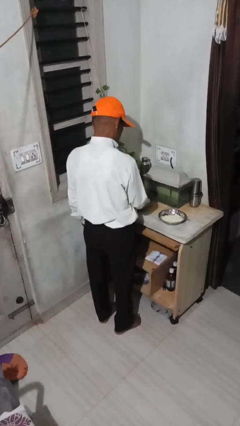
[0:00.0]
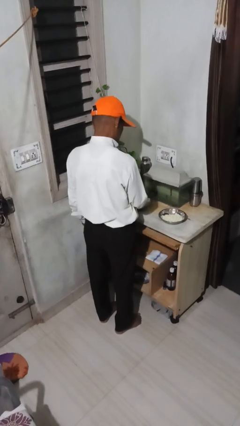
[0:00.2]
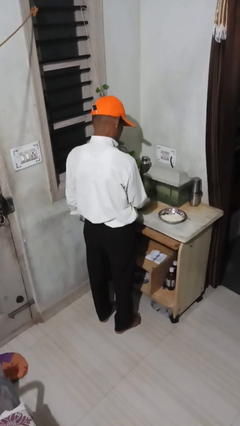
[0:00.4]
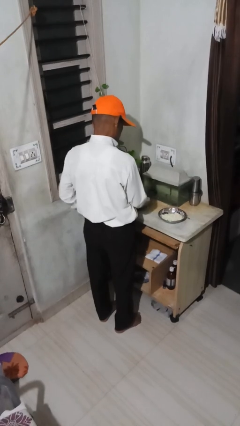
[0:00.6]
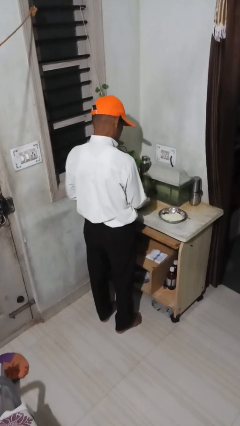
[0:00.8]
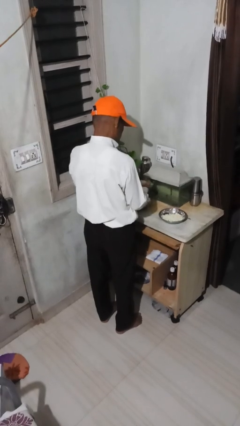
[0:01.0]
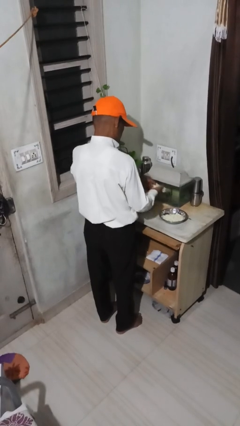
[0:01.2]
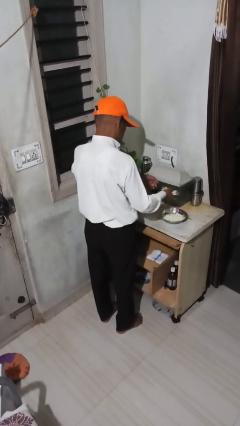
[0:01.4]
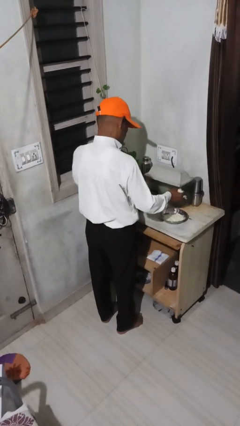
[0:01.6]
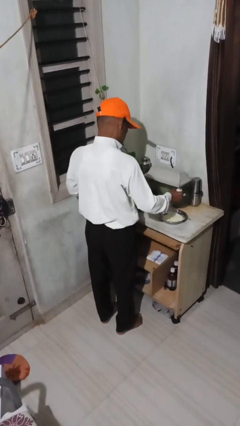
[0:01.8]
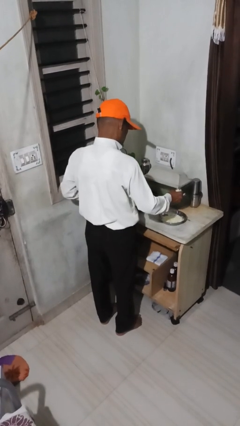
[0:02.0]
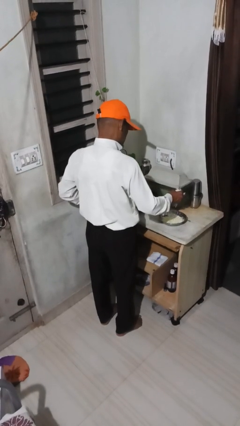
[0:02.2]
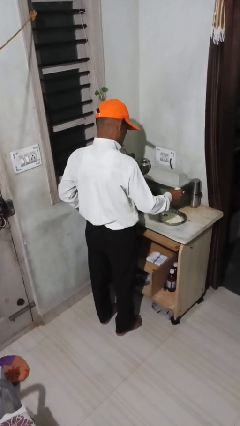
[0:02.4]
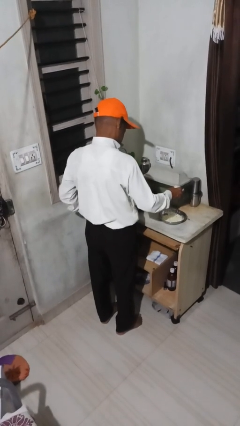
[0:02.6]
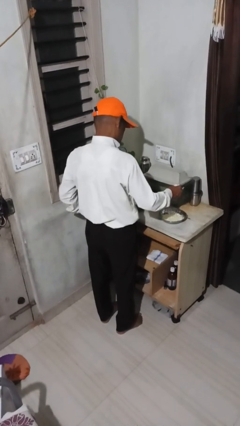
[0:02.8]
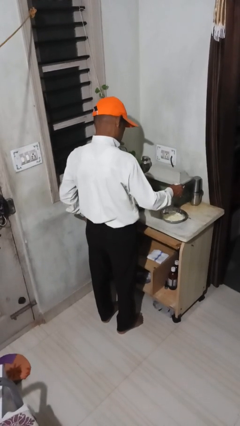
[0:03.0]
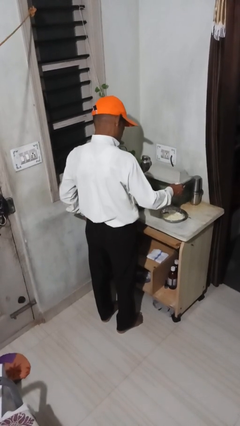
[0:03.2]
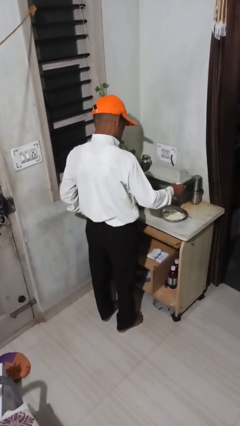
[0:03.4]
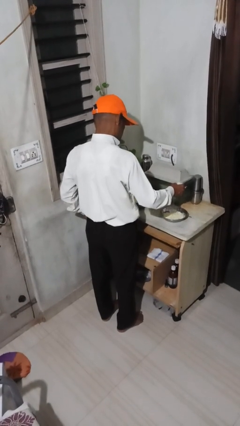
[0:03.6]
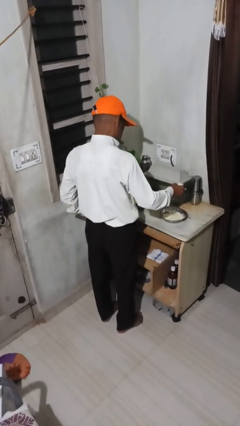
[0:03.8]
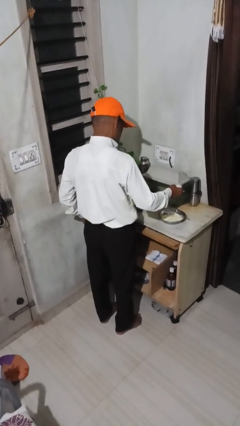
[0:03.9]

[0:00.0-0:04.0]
person pours into bowl

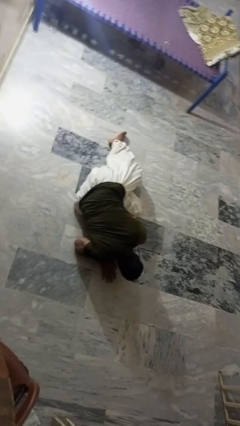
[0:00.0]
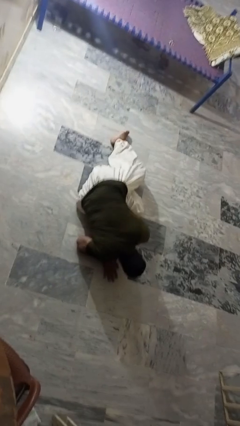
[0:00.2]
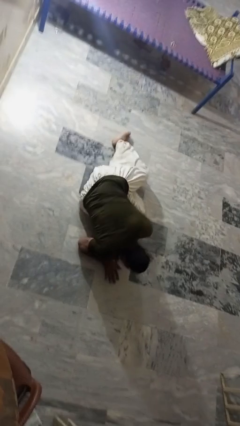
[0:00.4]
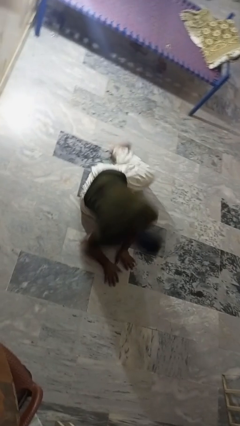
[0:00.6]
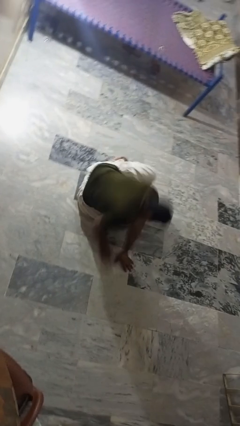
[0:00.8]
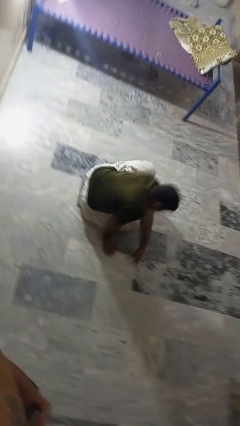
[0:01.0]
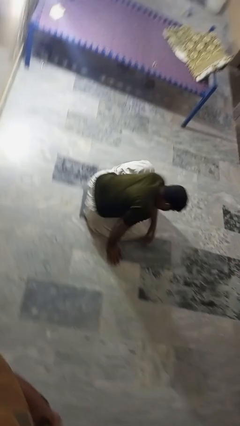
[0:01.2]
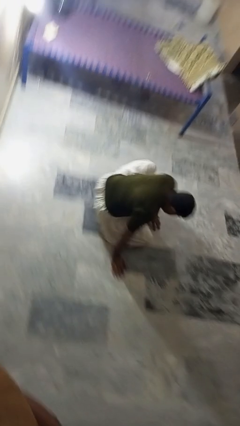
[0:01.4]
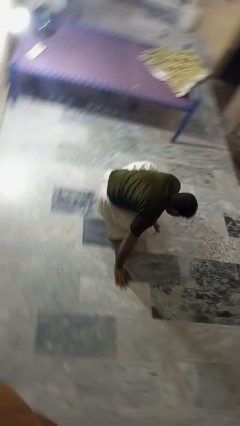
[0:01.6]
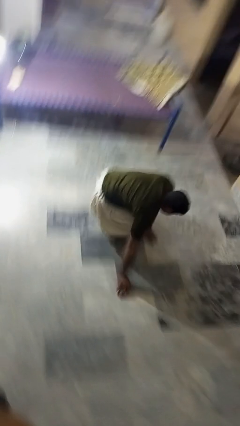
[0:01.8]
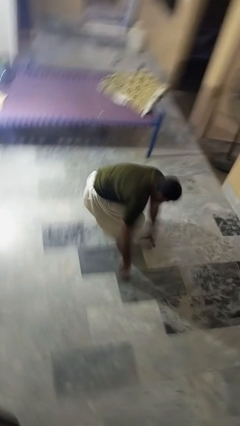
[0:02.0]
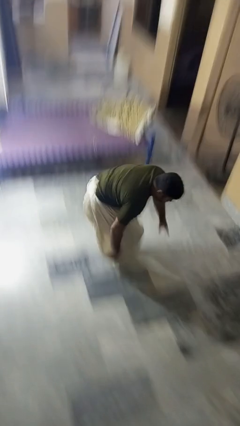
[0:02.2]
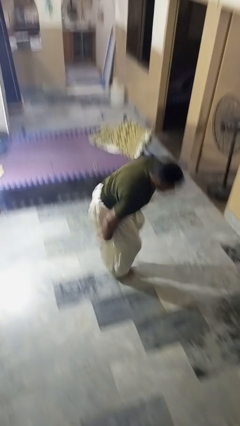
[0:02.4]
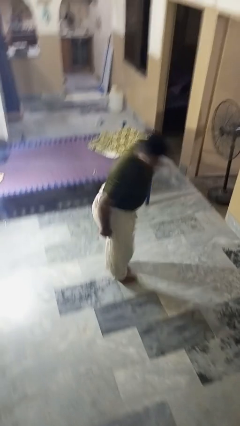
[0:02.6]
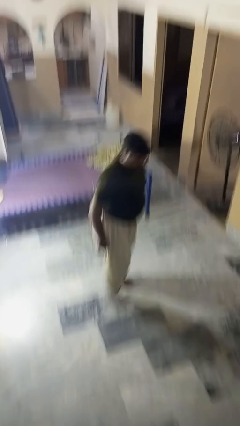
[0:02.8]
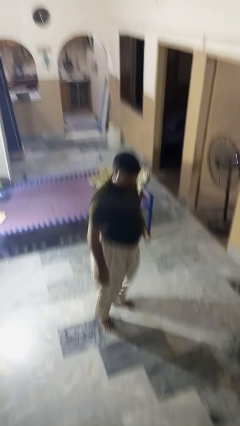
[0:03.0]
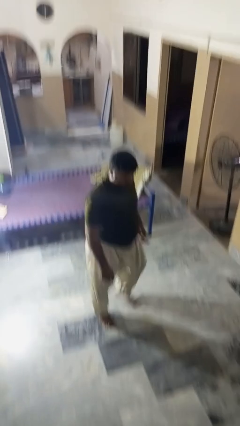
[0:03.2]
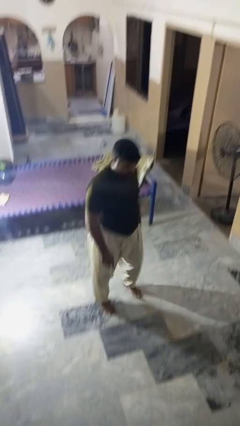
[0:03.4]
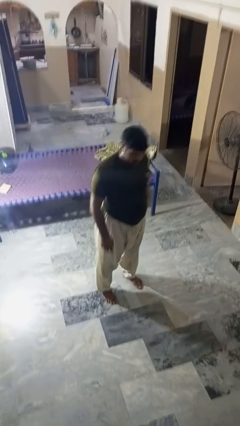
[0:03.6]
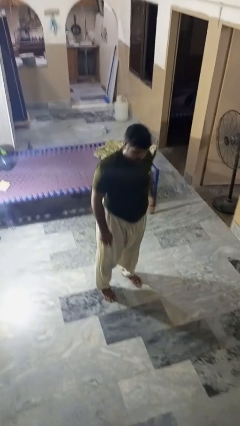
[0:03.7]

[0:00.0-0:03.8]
person stands up from floor

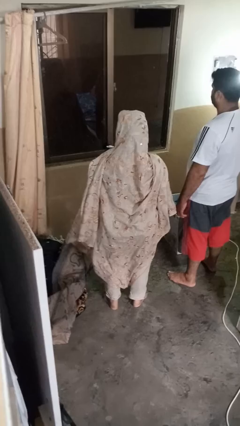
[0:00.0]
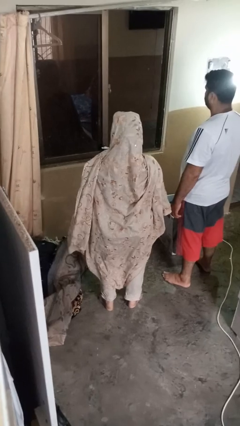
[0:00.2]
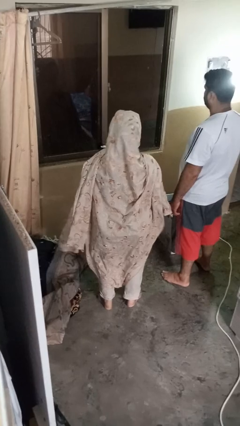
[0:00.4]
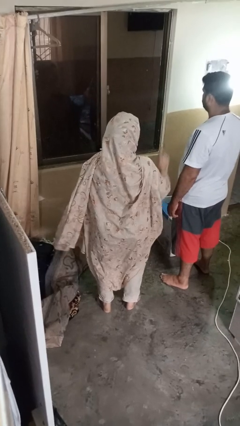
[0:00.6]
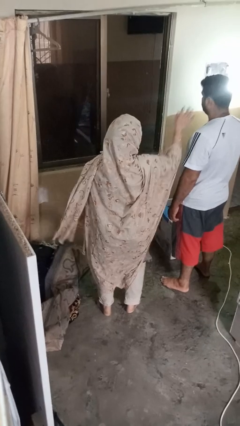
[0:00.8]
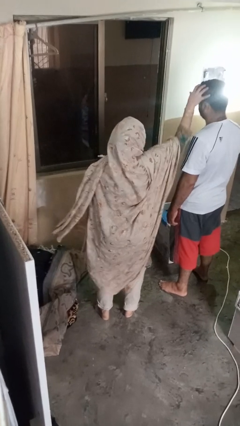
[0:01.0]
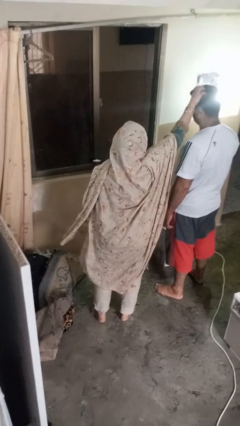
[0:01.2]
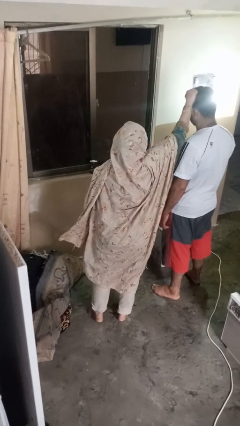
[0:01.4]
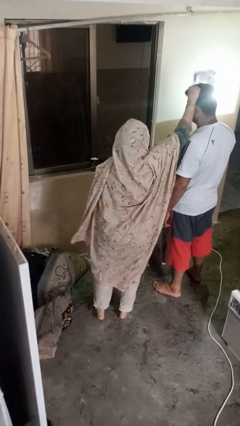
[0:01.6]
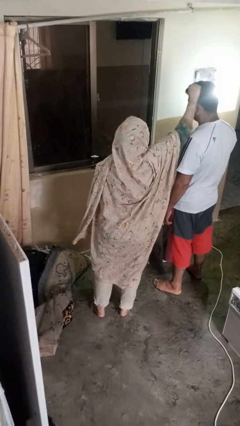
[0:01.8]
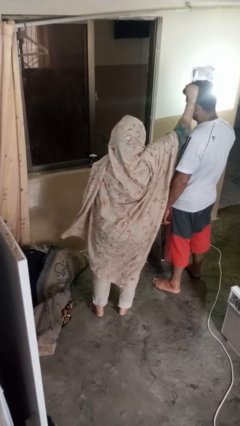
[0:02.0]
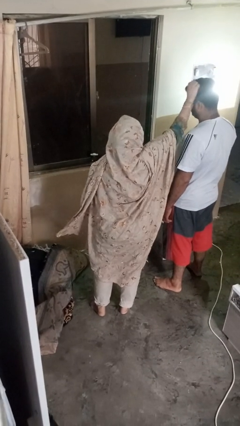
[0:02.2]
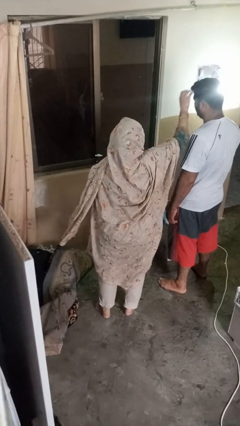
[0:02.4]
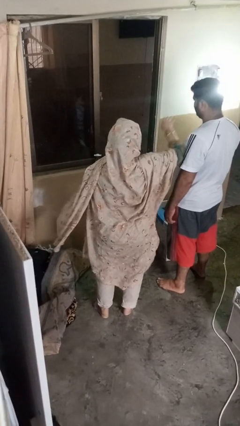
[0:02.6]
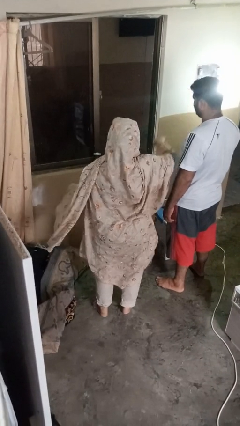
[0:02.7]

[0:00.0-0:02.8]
person grabs person by hair

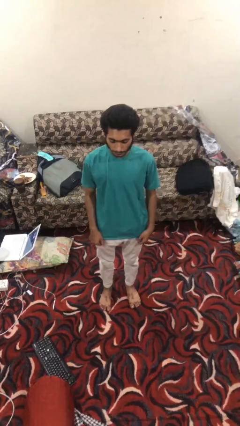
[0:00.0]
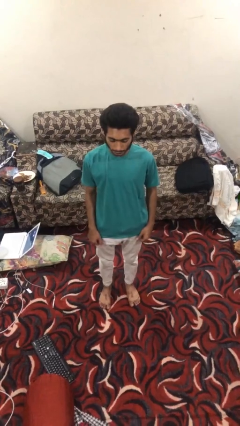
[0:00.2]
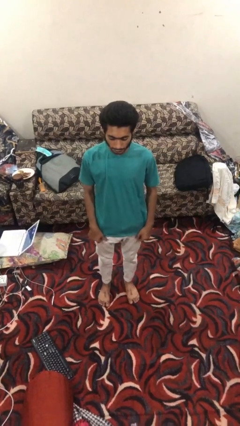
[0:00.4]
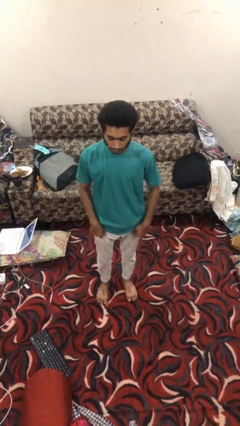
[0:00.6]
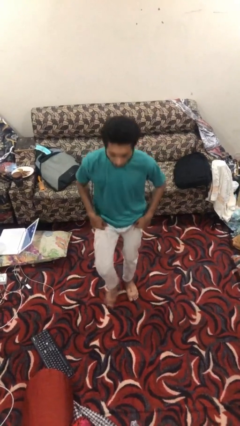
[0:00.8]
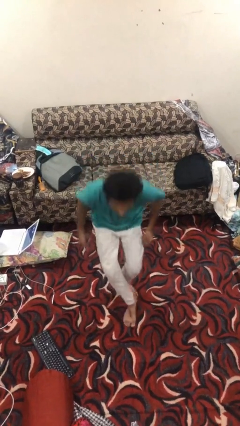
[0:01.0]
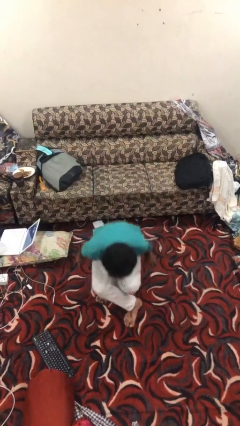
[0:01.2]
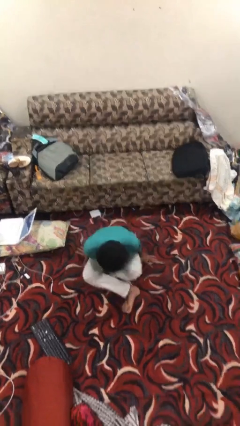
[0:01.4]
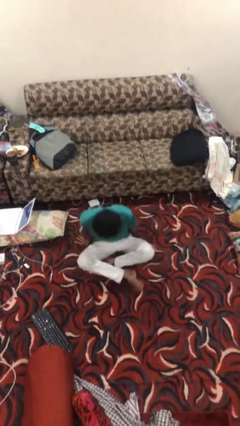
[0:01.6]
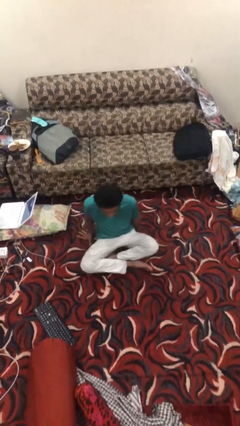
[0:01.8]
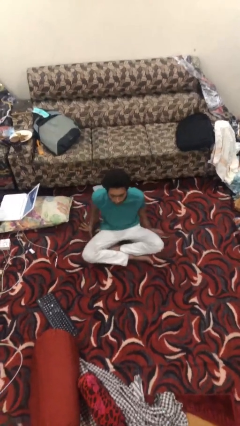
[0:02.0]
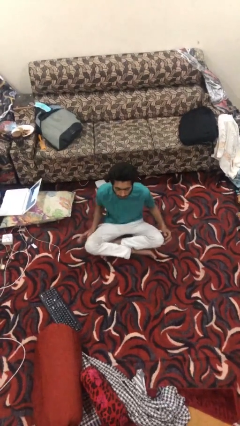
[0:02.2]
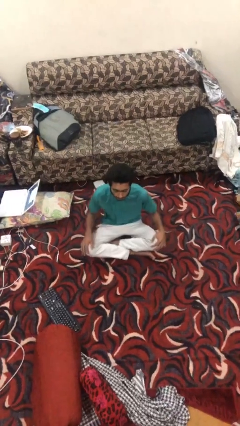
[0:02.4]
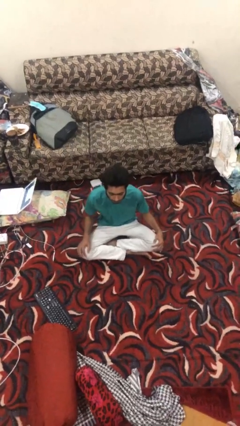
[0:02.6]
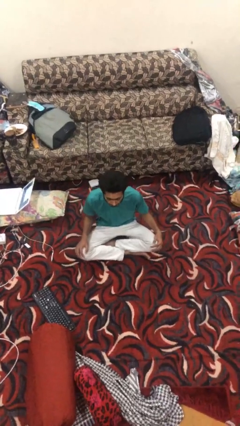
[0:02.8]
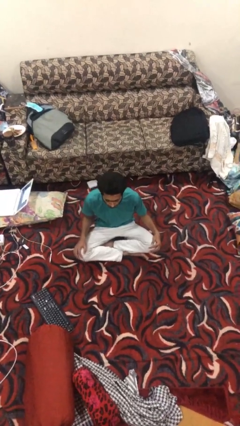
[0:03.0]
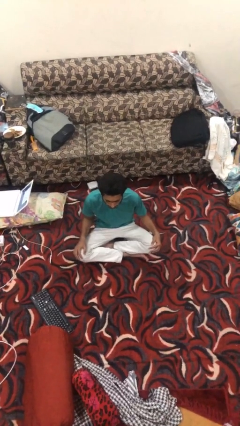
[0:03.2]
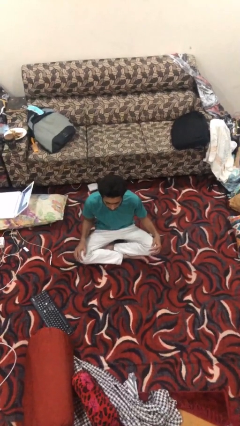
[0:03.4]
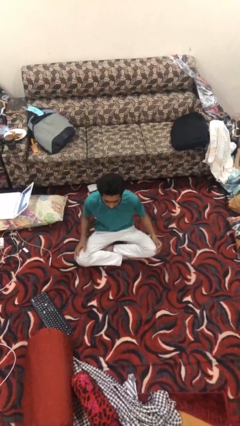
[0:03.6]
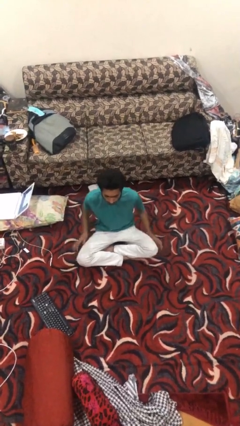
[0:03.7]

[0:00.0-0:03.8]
person sits crisscross

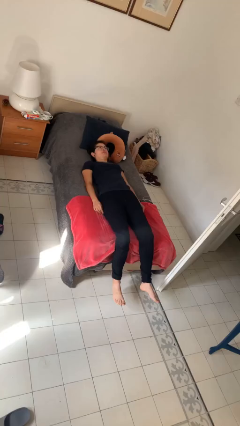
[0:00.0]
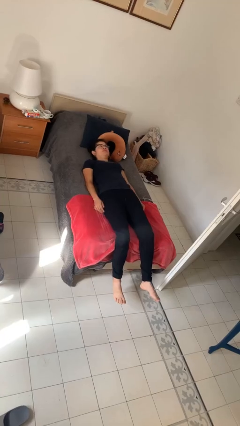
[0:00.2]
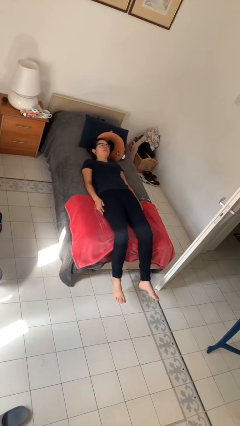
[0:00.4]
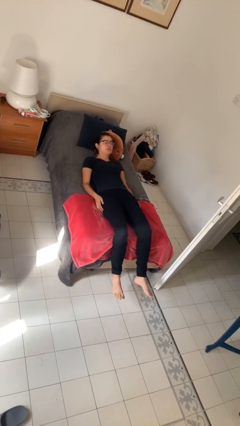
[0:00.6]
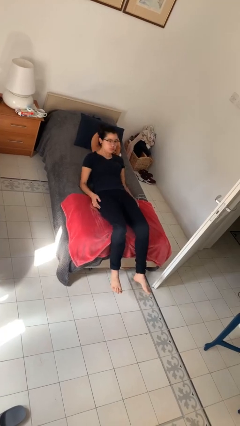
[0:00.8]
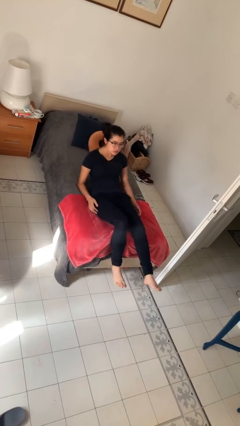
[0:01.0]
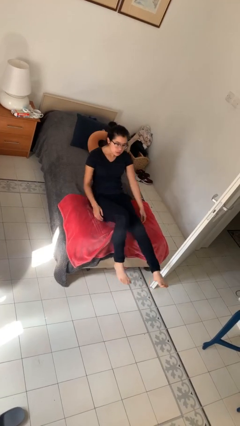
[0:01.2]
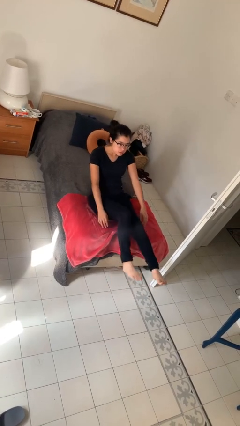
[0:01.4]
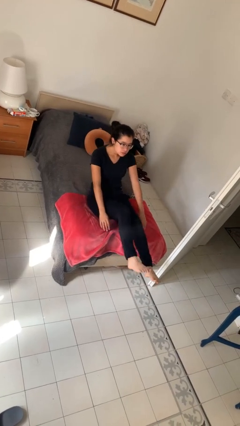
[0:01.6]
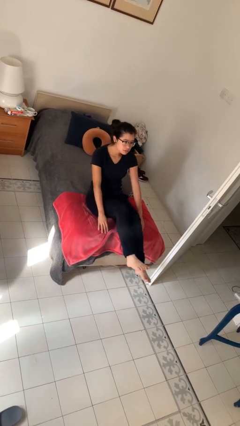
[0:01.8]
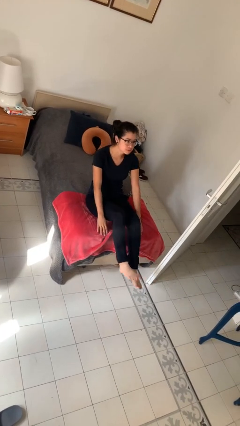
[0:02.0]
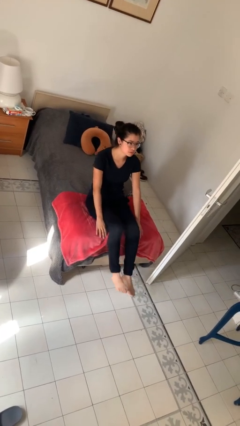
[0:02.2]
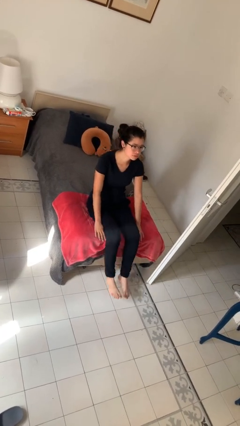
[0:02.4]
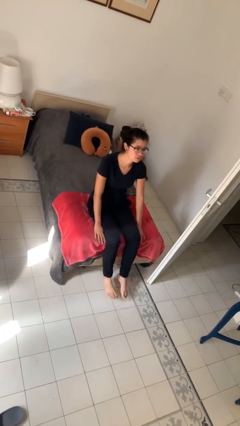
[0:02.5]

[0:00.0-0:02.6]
person stands up

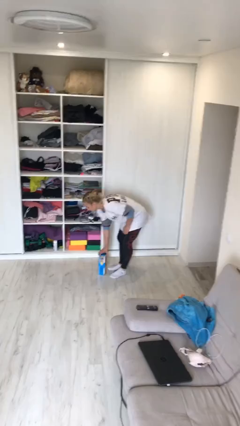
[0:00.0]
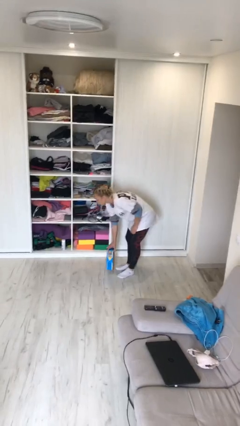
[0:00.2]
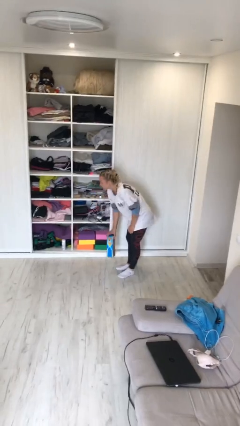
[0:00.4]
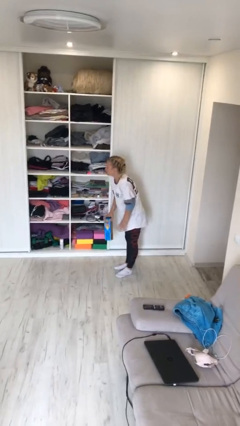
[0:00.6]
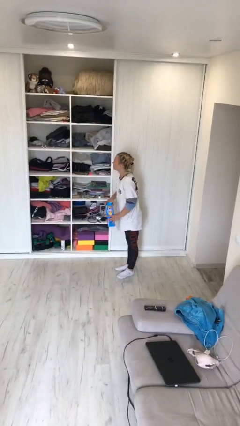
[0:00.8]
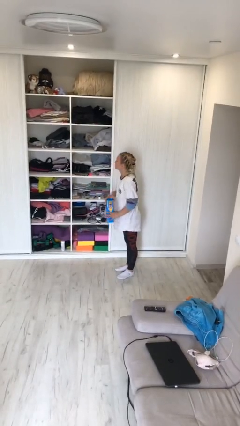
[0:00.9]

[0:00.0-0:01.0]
person picks up object from floor
